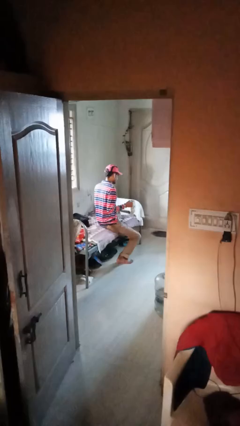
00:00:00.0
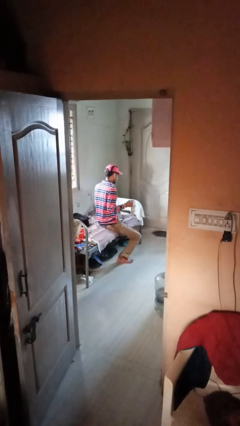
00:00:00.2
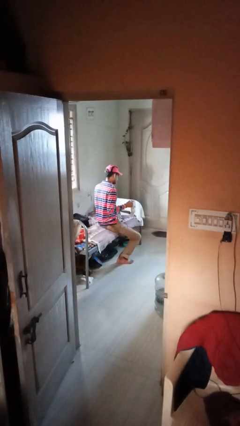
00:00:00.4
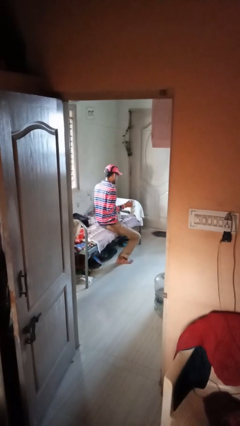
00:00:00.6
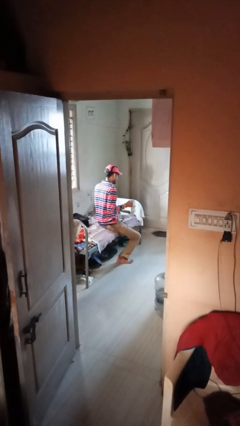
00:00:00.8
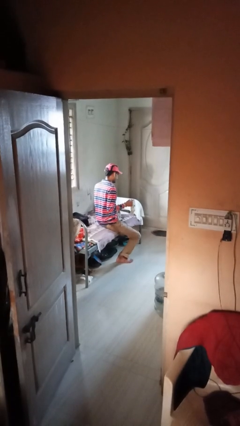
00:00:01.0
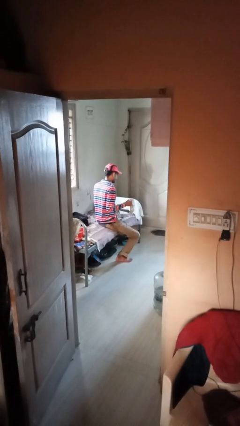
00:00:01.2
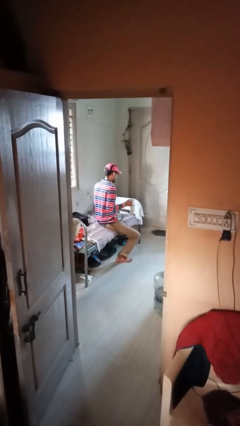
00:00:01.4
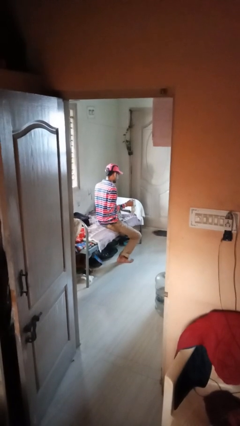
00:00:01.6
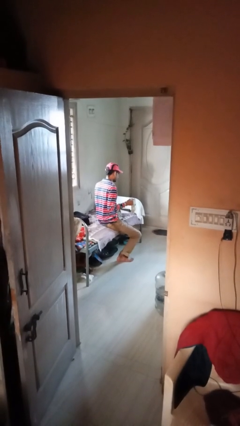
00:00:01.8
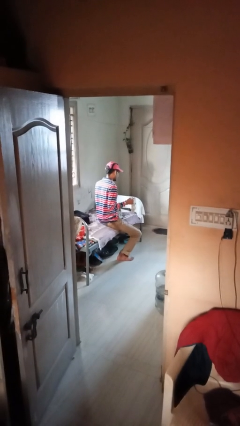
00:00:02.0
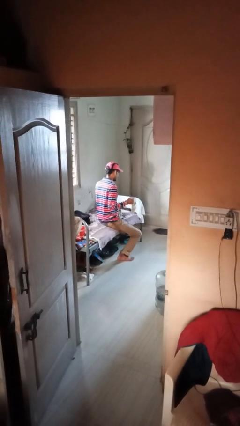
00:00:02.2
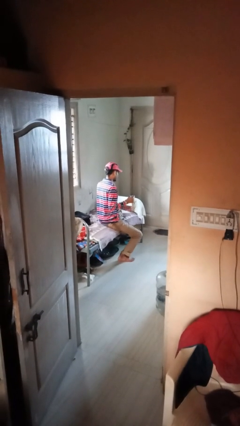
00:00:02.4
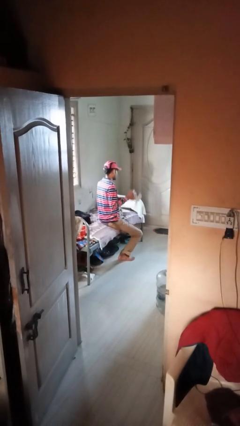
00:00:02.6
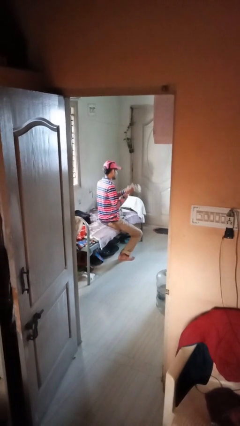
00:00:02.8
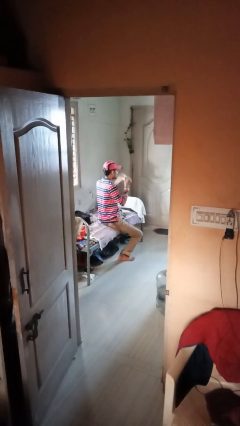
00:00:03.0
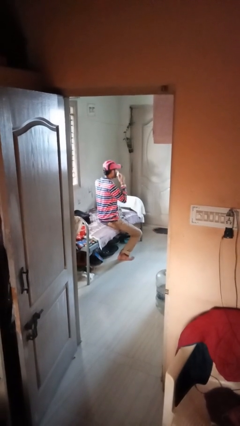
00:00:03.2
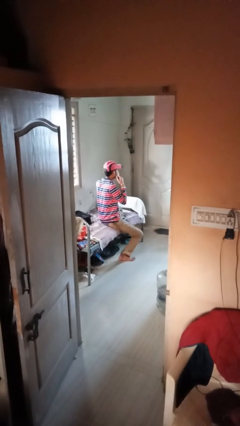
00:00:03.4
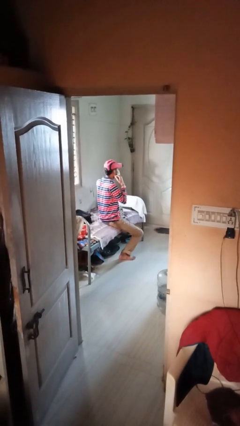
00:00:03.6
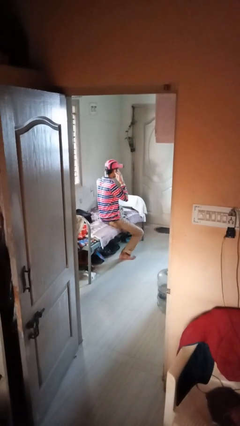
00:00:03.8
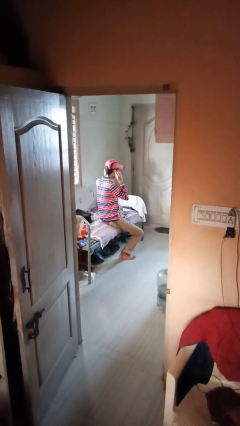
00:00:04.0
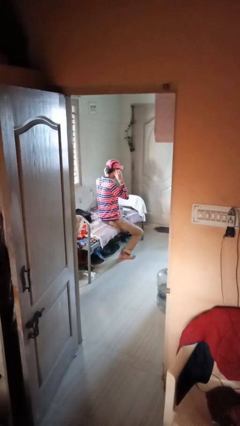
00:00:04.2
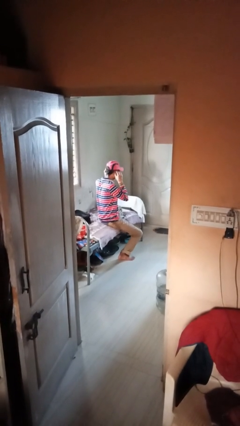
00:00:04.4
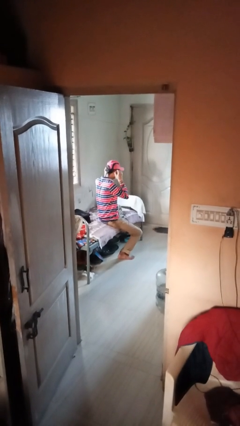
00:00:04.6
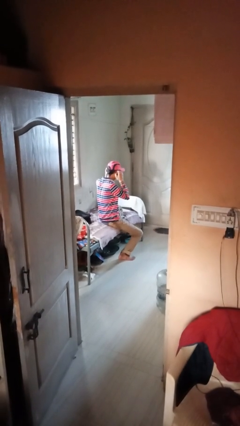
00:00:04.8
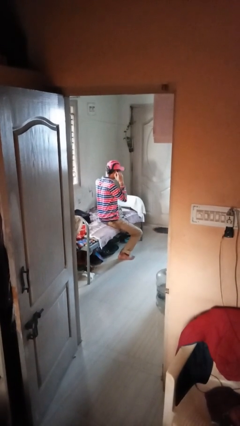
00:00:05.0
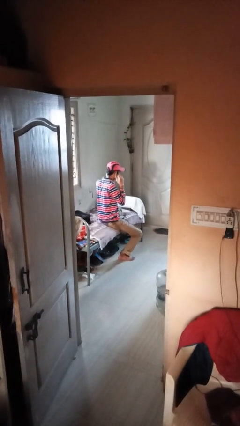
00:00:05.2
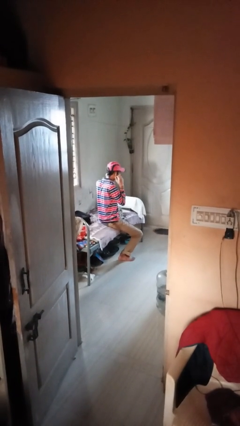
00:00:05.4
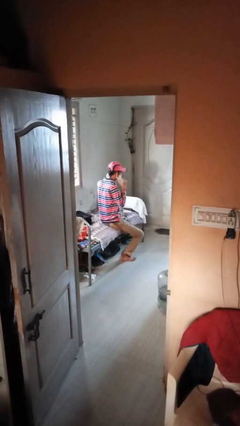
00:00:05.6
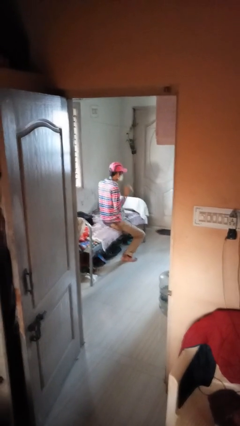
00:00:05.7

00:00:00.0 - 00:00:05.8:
person puts on facemask

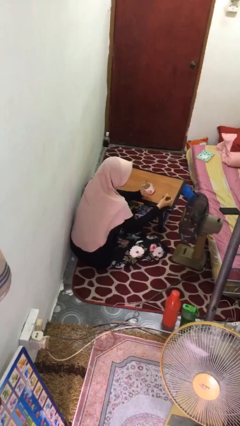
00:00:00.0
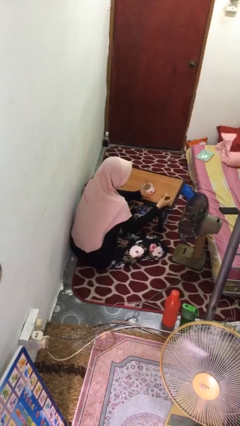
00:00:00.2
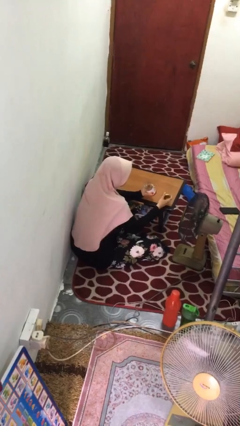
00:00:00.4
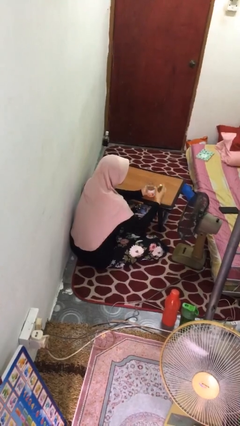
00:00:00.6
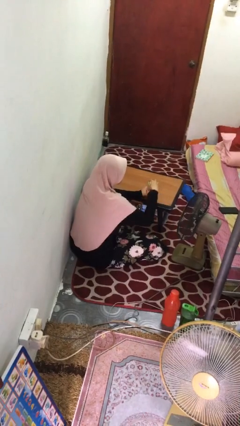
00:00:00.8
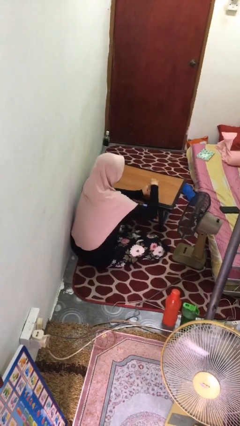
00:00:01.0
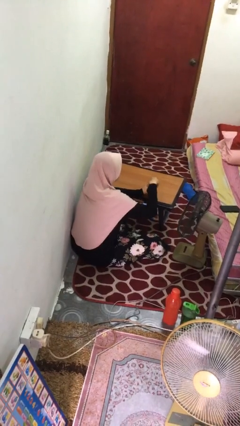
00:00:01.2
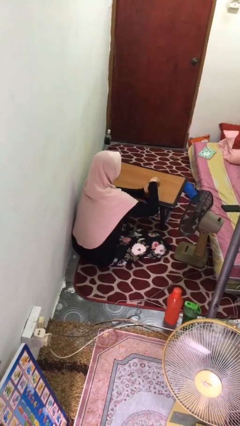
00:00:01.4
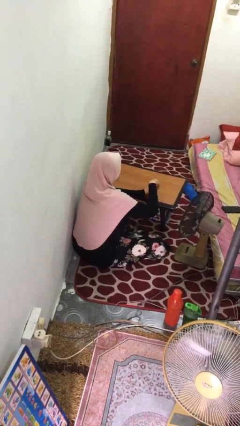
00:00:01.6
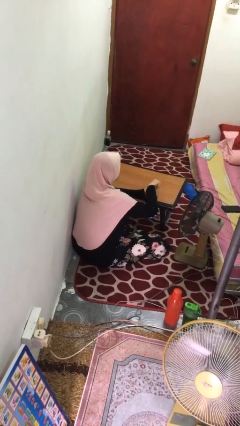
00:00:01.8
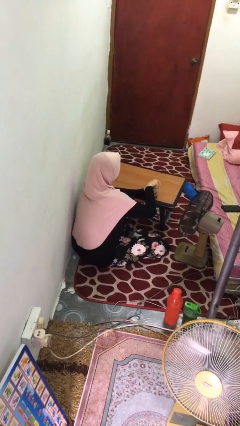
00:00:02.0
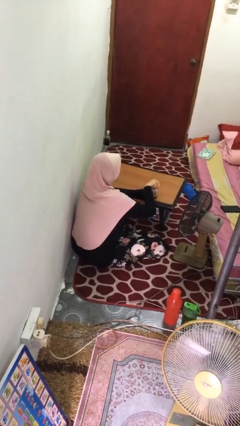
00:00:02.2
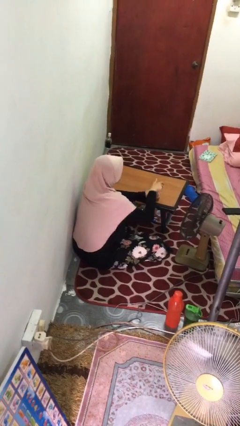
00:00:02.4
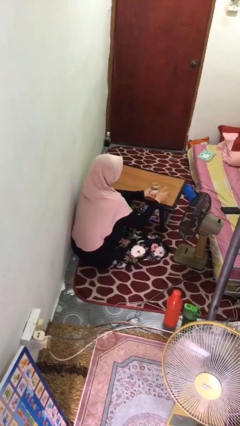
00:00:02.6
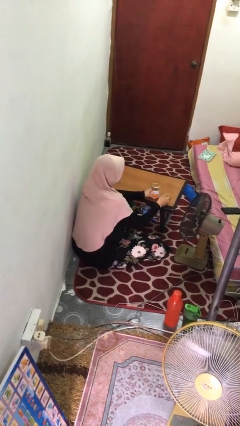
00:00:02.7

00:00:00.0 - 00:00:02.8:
person closes jar

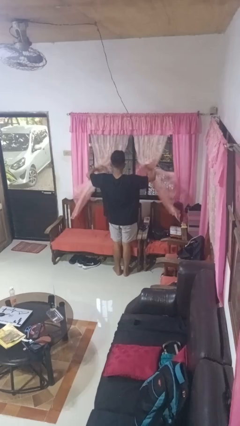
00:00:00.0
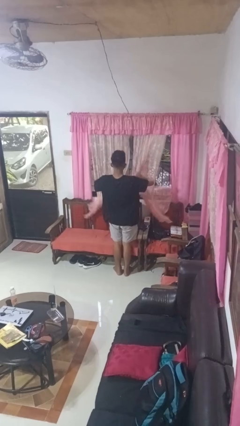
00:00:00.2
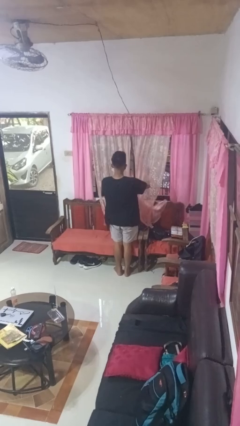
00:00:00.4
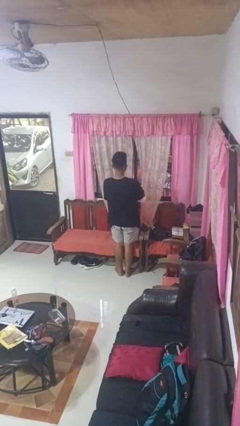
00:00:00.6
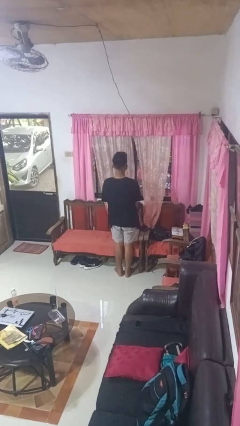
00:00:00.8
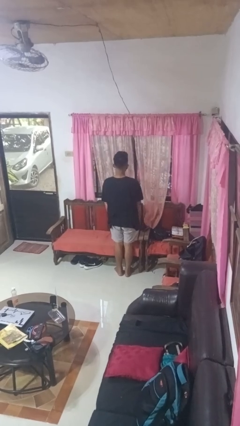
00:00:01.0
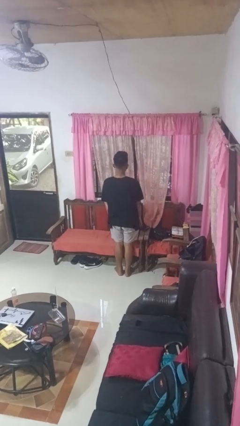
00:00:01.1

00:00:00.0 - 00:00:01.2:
person closes curtains

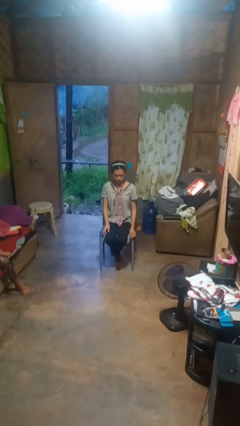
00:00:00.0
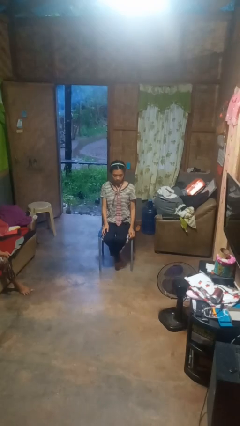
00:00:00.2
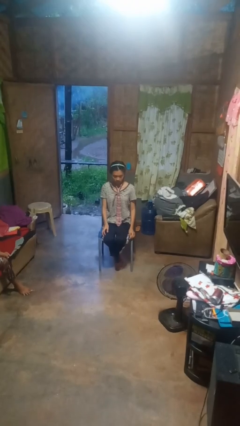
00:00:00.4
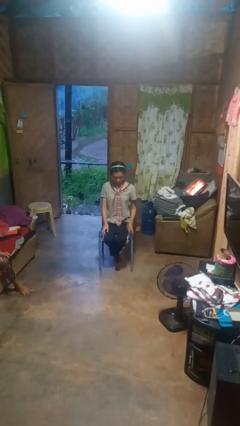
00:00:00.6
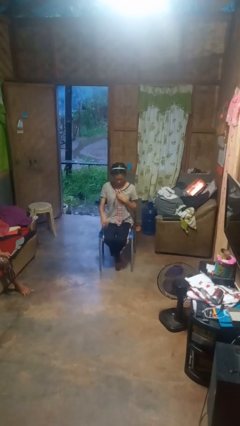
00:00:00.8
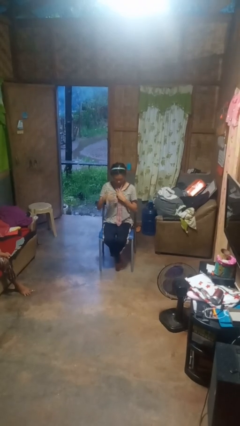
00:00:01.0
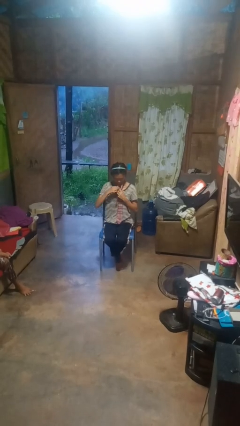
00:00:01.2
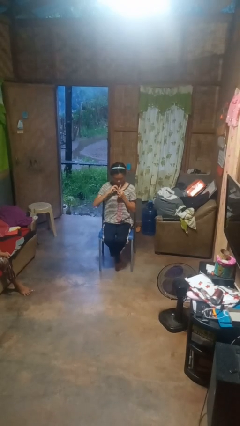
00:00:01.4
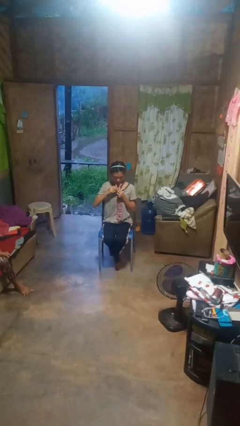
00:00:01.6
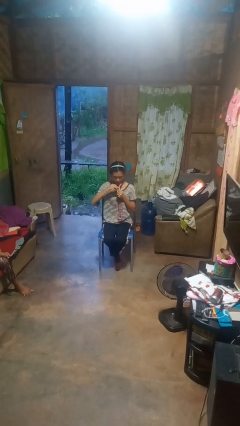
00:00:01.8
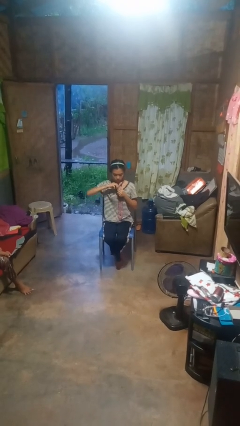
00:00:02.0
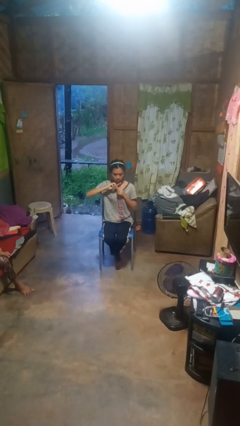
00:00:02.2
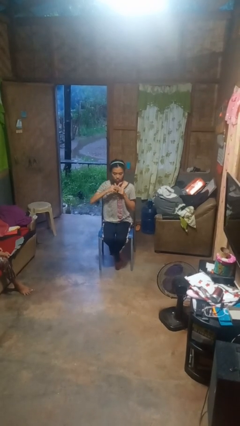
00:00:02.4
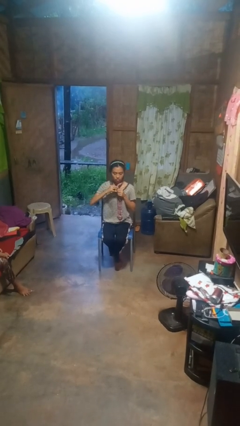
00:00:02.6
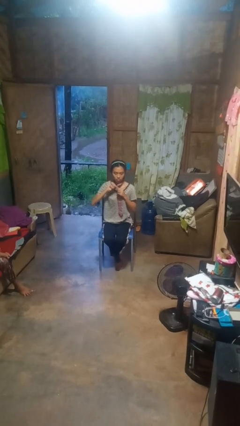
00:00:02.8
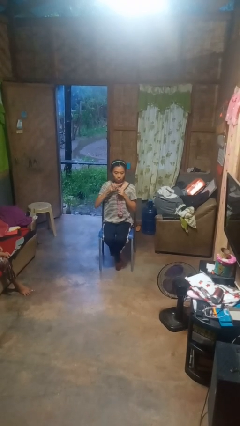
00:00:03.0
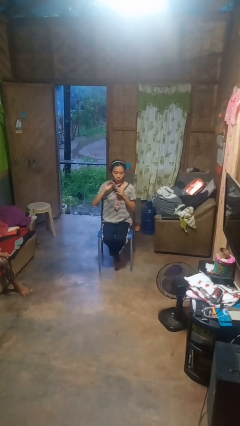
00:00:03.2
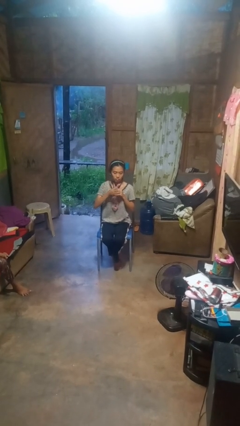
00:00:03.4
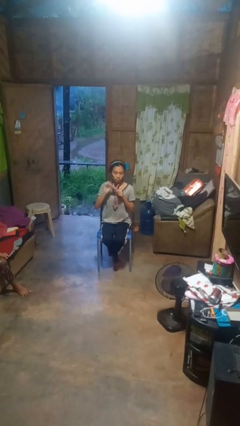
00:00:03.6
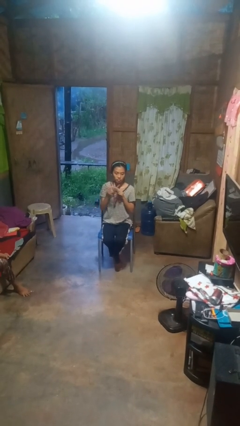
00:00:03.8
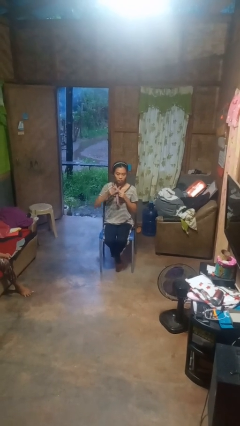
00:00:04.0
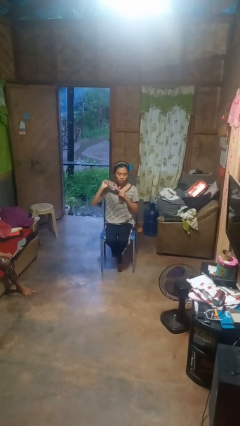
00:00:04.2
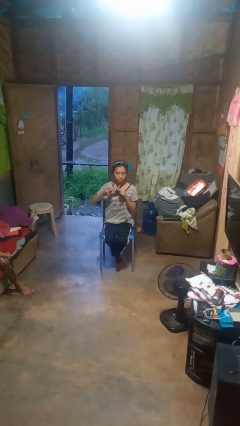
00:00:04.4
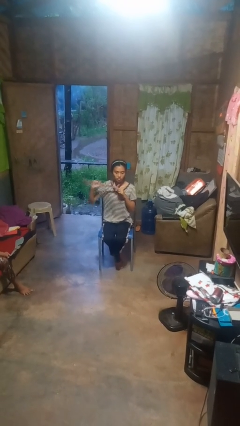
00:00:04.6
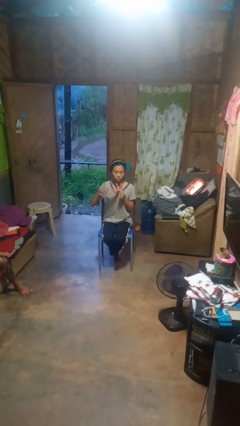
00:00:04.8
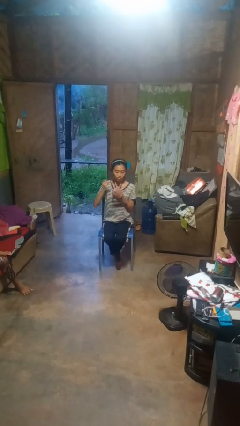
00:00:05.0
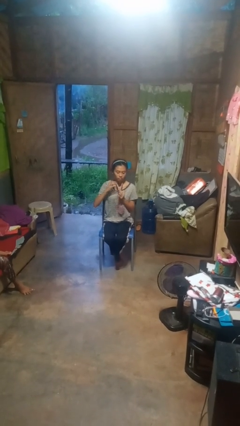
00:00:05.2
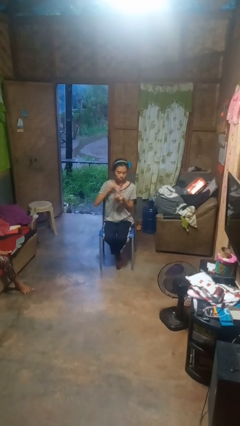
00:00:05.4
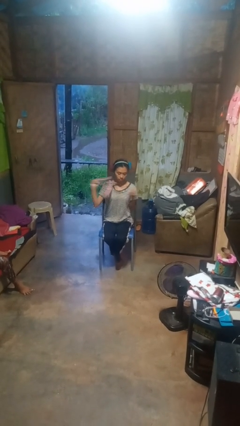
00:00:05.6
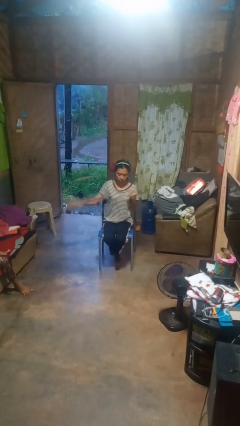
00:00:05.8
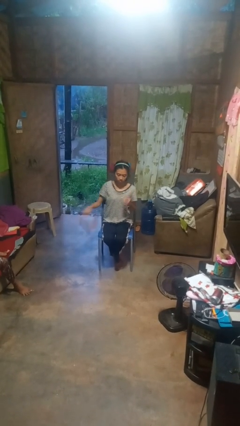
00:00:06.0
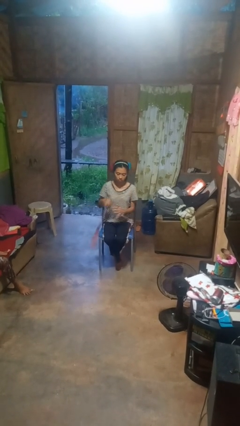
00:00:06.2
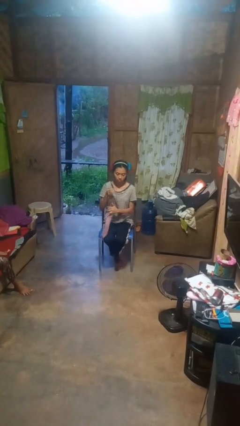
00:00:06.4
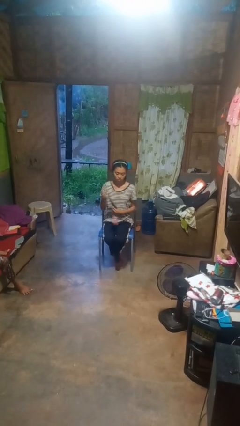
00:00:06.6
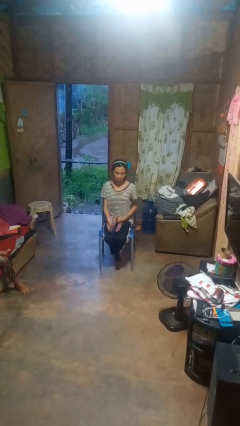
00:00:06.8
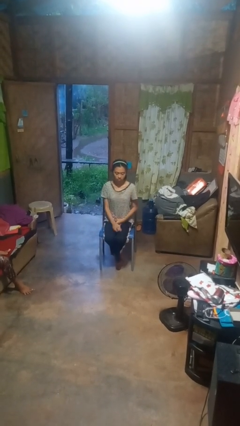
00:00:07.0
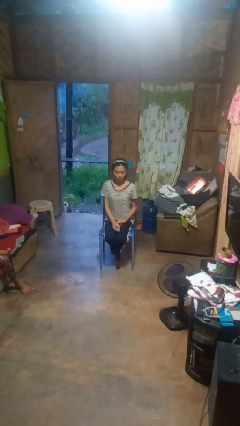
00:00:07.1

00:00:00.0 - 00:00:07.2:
person takes off necktie

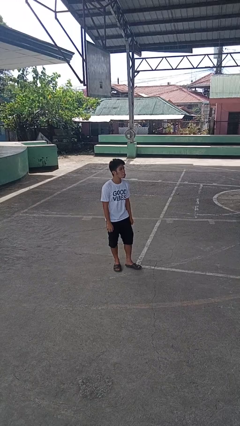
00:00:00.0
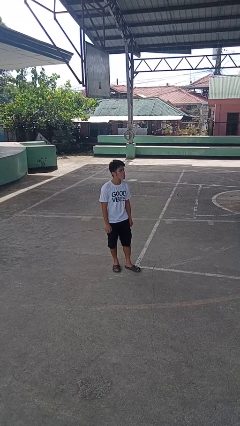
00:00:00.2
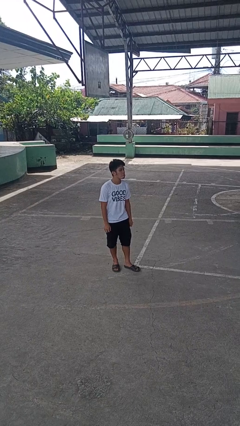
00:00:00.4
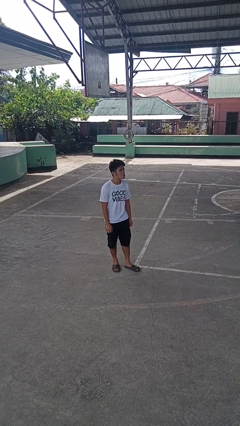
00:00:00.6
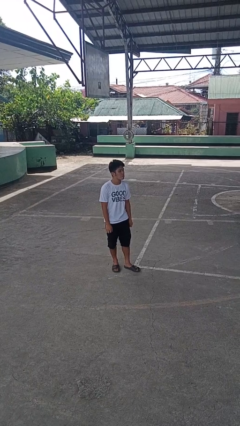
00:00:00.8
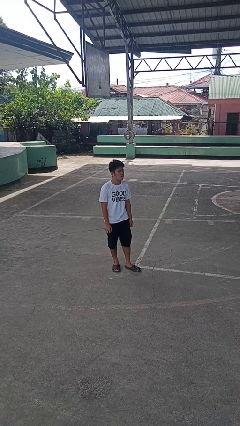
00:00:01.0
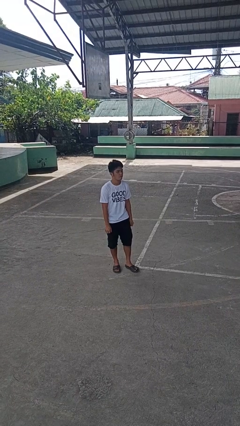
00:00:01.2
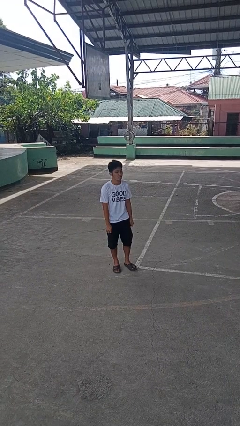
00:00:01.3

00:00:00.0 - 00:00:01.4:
person sticks out tongue
